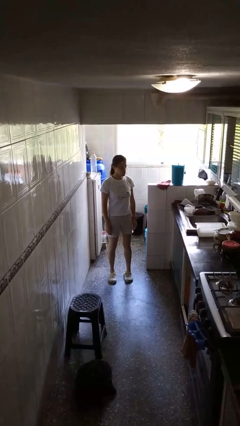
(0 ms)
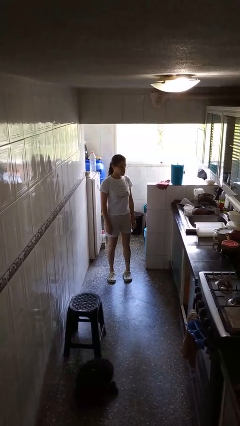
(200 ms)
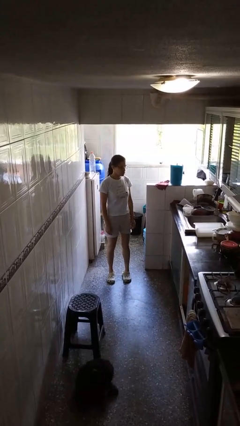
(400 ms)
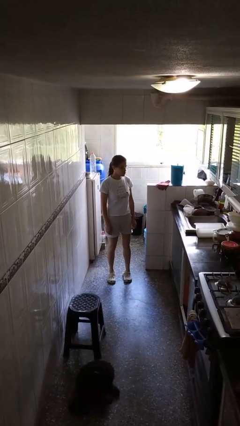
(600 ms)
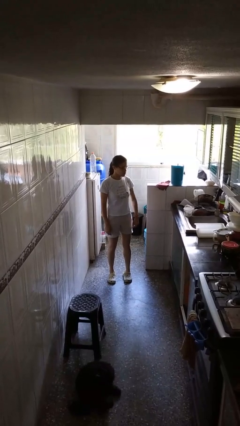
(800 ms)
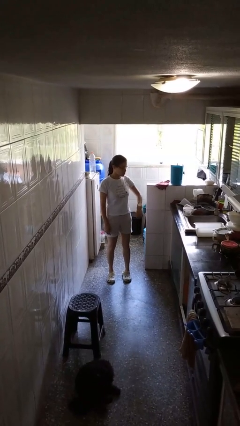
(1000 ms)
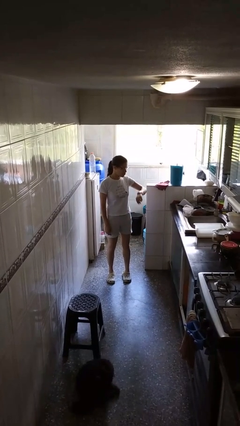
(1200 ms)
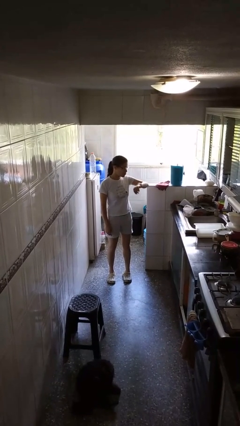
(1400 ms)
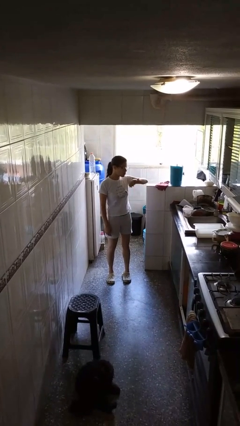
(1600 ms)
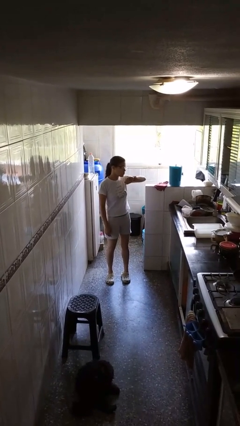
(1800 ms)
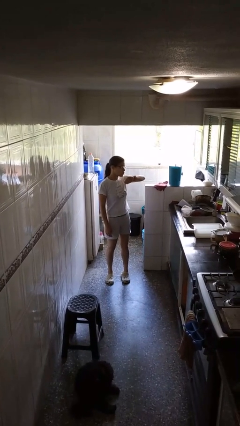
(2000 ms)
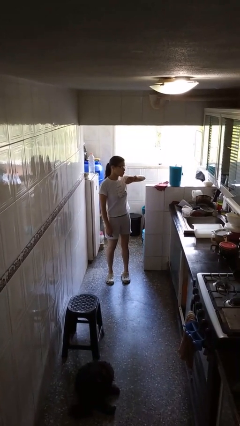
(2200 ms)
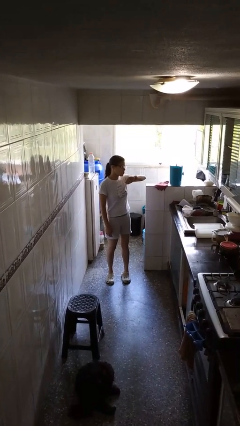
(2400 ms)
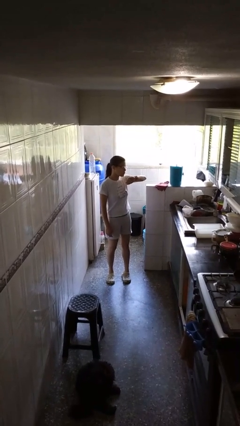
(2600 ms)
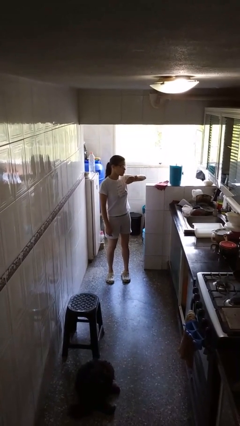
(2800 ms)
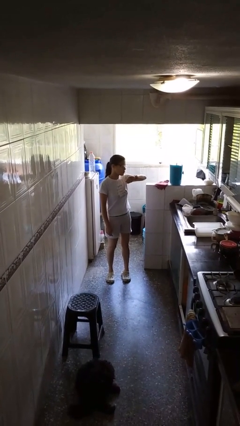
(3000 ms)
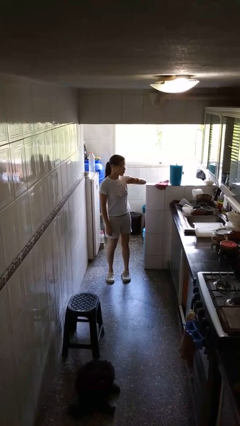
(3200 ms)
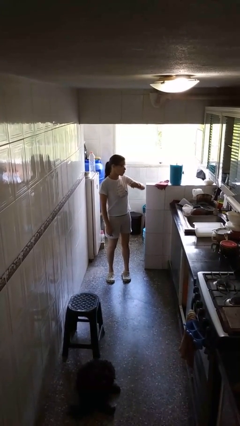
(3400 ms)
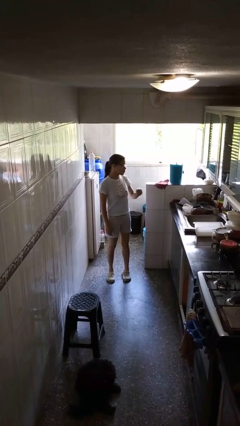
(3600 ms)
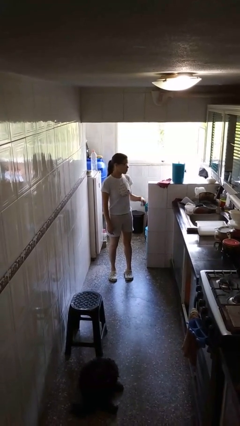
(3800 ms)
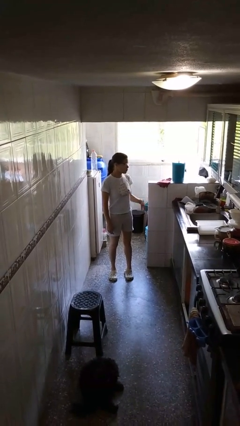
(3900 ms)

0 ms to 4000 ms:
person looks at wristwatch

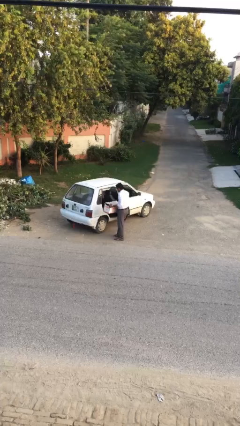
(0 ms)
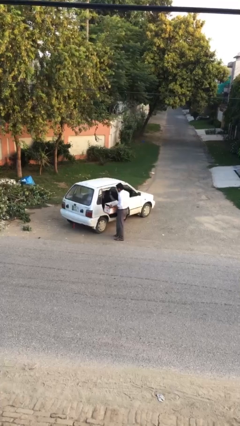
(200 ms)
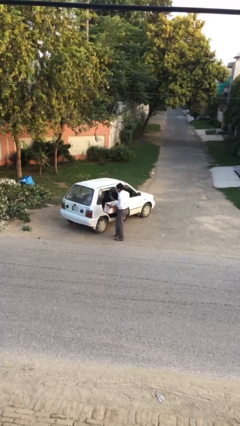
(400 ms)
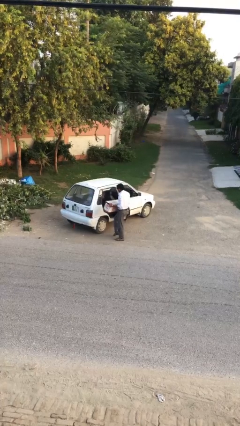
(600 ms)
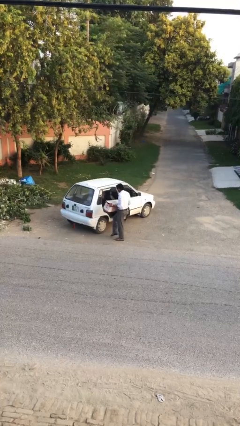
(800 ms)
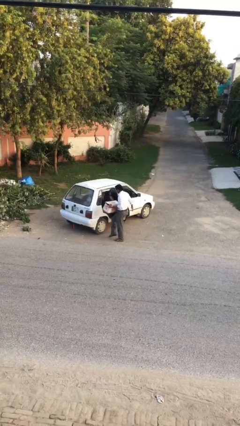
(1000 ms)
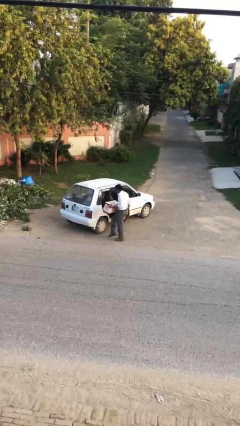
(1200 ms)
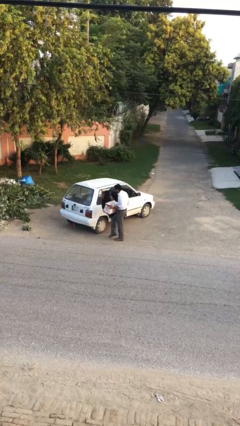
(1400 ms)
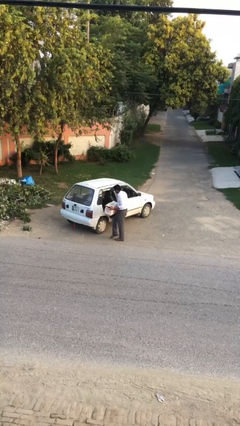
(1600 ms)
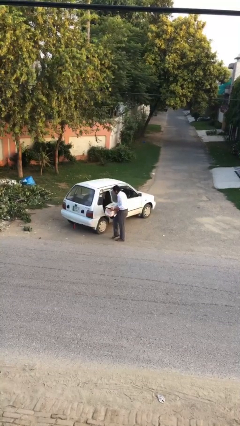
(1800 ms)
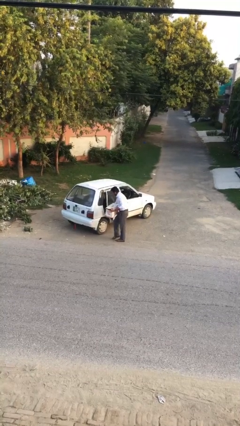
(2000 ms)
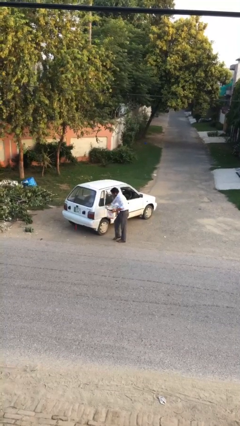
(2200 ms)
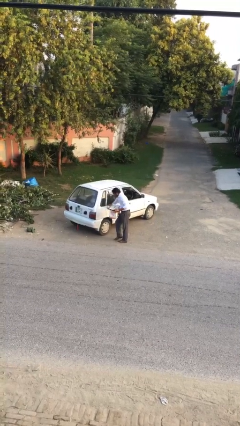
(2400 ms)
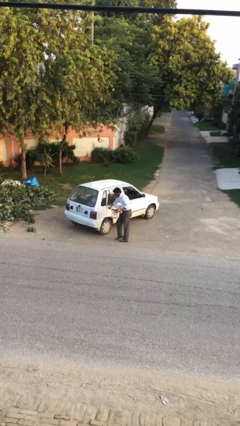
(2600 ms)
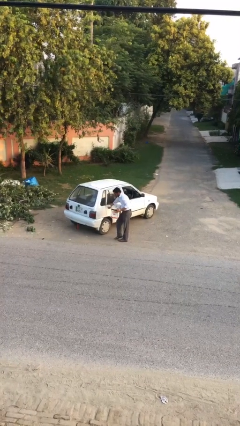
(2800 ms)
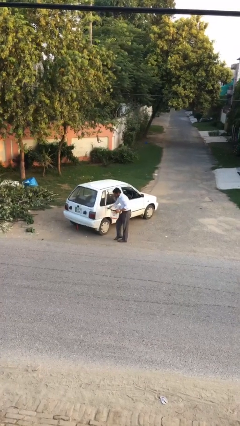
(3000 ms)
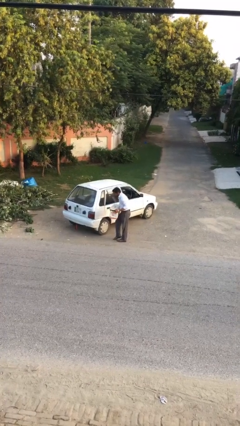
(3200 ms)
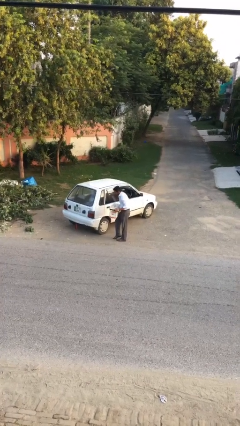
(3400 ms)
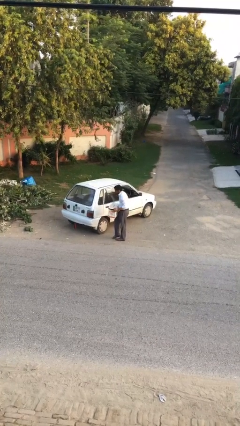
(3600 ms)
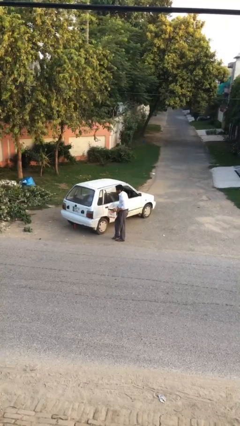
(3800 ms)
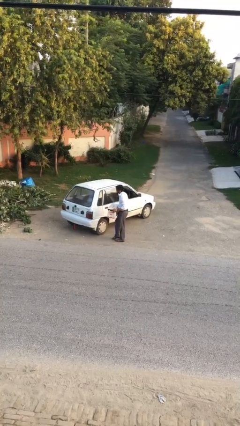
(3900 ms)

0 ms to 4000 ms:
person closes car door

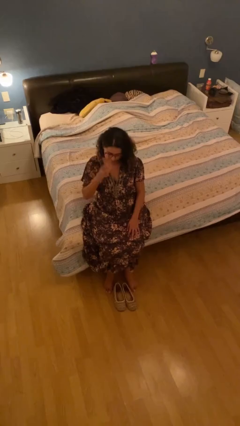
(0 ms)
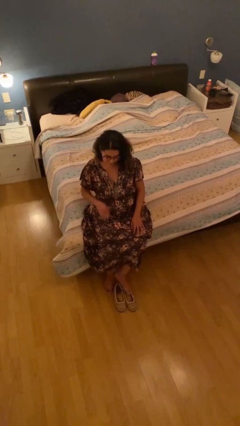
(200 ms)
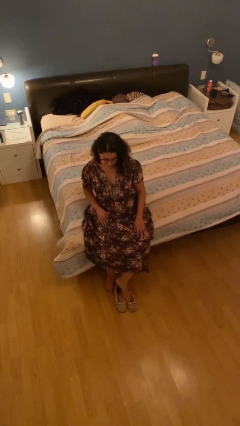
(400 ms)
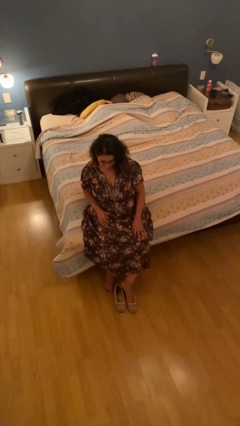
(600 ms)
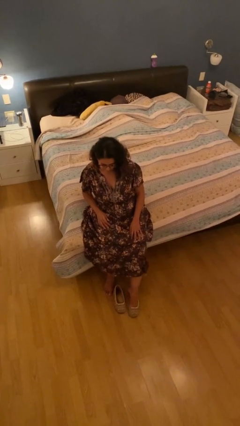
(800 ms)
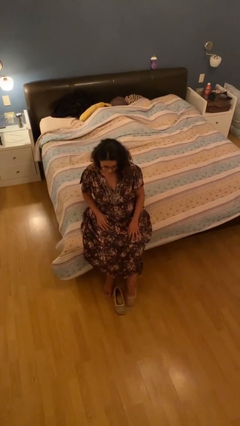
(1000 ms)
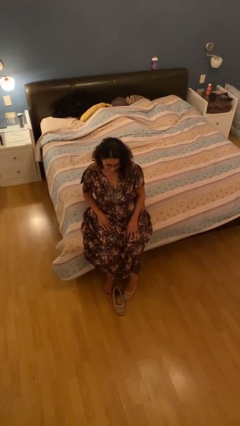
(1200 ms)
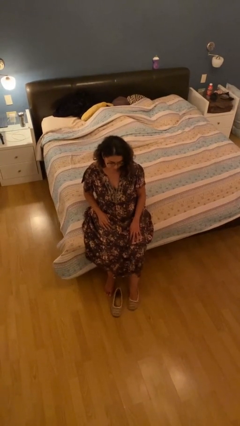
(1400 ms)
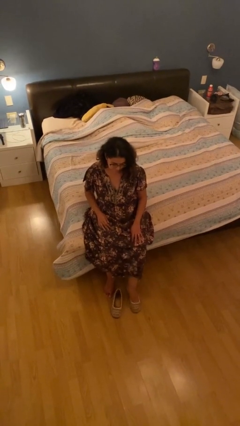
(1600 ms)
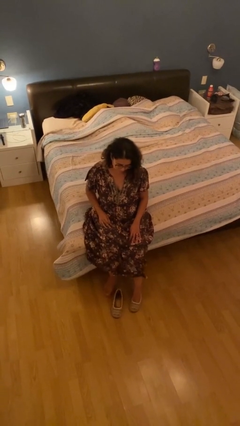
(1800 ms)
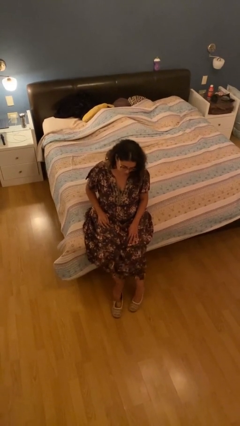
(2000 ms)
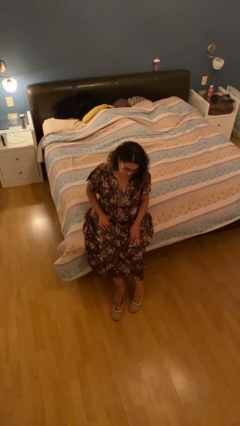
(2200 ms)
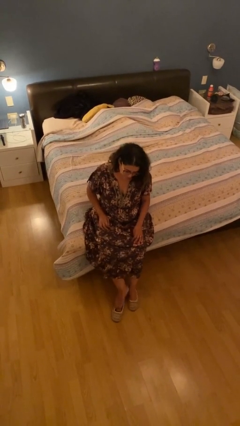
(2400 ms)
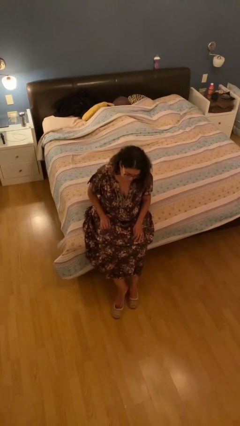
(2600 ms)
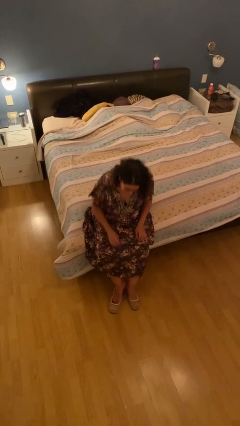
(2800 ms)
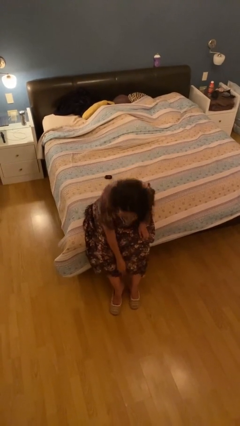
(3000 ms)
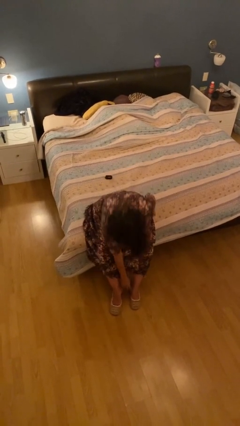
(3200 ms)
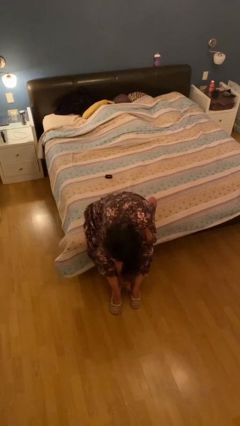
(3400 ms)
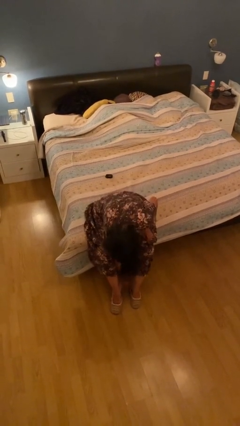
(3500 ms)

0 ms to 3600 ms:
person puts on shoes

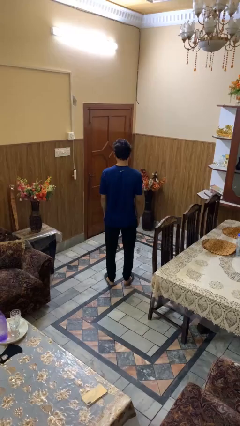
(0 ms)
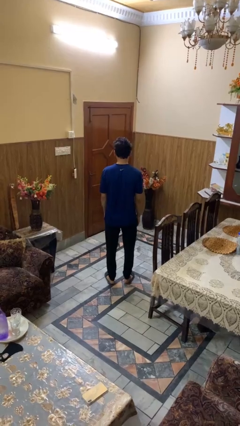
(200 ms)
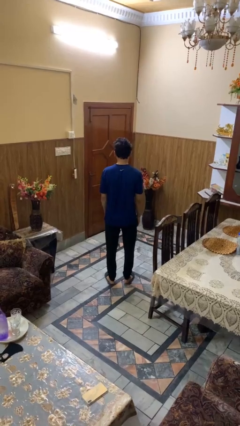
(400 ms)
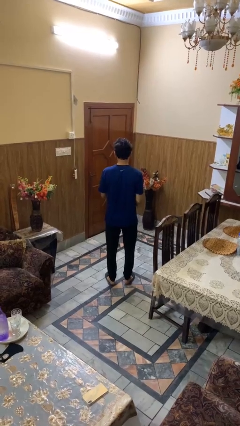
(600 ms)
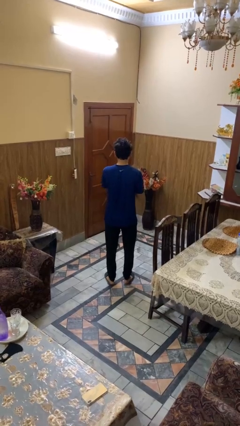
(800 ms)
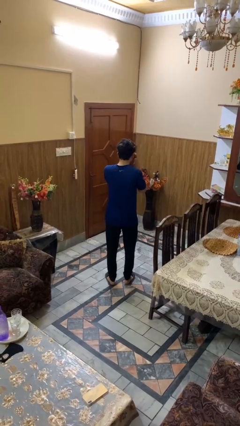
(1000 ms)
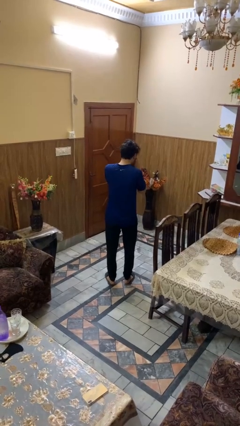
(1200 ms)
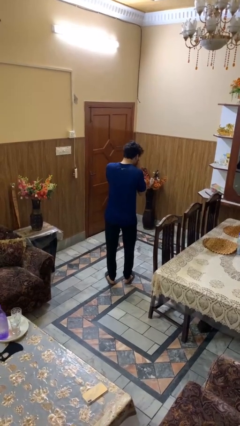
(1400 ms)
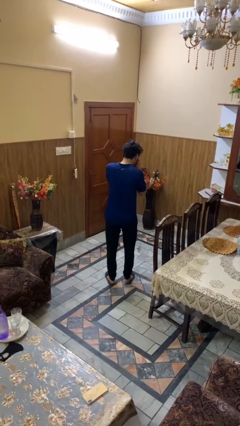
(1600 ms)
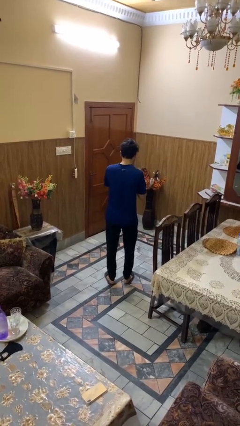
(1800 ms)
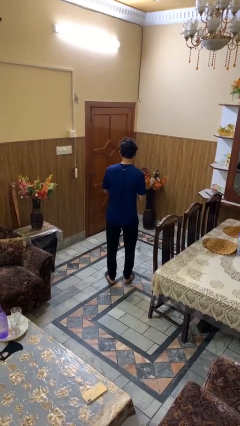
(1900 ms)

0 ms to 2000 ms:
person sneezes into hand

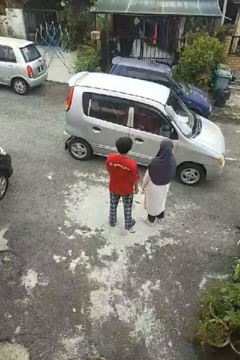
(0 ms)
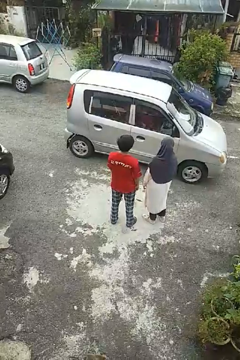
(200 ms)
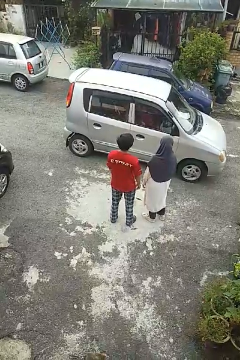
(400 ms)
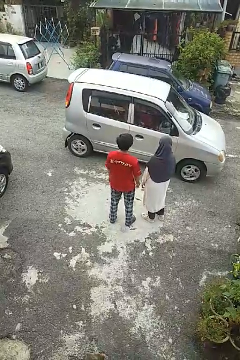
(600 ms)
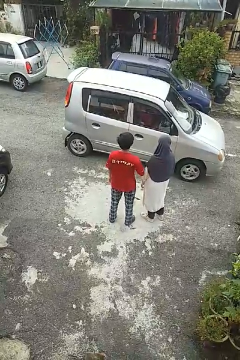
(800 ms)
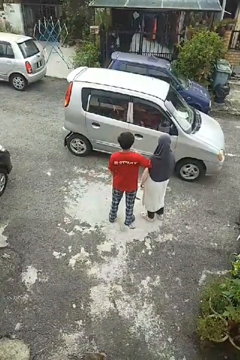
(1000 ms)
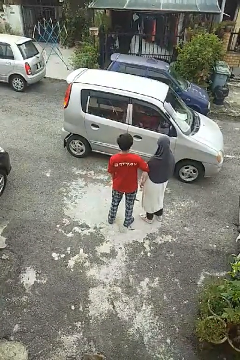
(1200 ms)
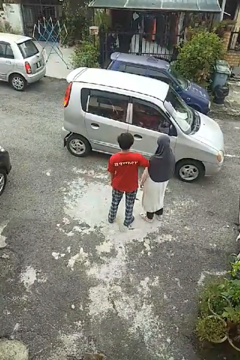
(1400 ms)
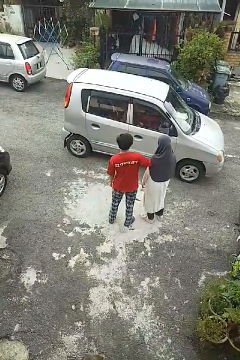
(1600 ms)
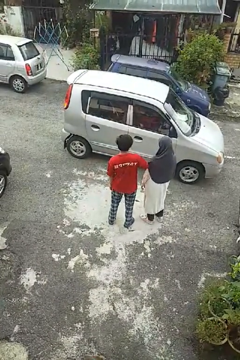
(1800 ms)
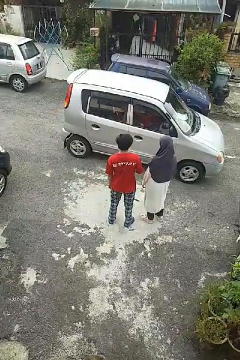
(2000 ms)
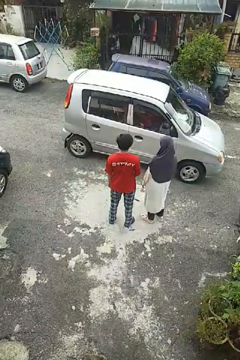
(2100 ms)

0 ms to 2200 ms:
person nudges person with elbow

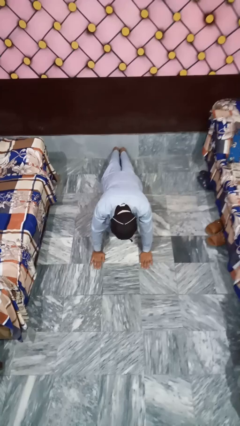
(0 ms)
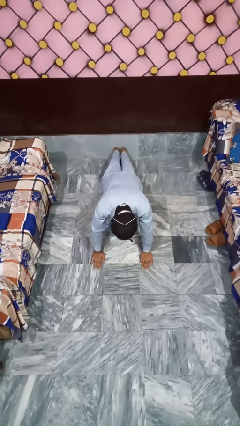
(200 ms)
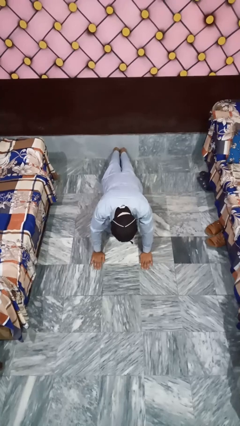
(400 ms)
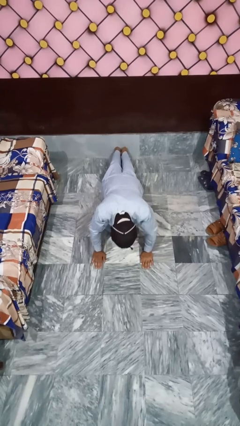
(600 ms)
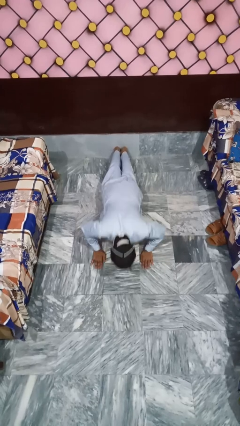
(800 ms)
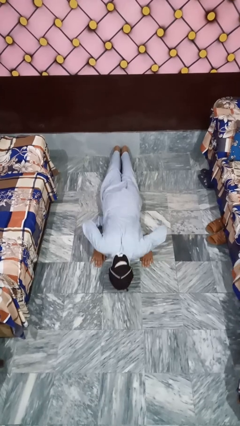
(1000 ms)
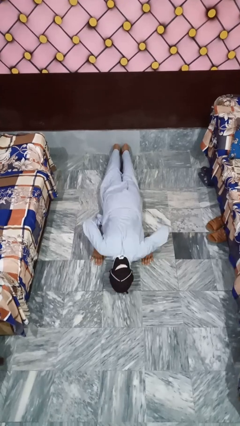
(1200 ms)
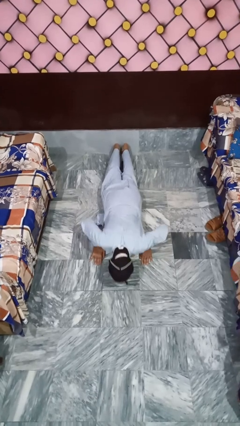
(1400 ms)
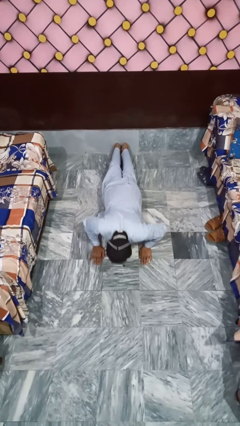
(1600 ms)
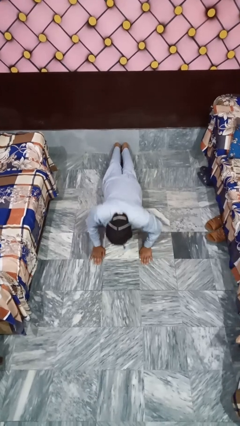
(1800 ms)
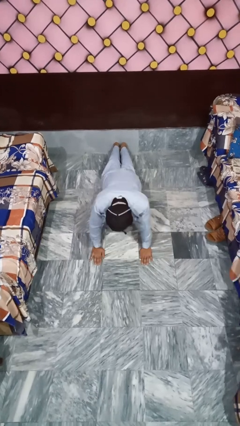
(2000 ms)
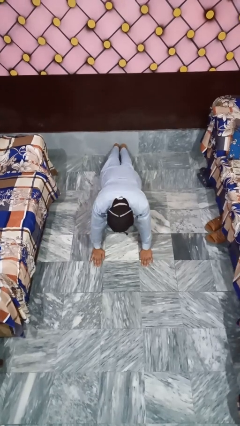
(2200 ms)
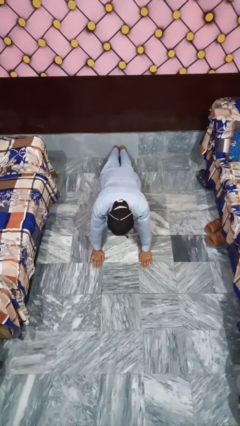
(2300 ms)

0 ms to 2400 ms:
person exercises with pushup
